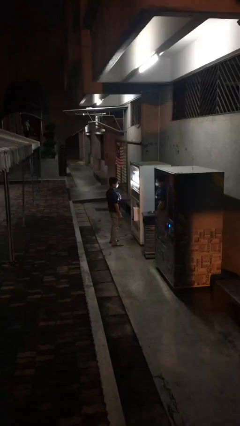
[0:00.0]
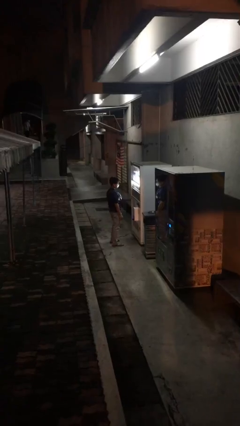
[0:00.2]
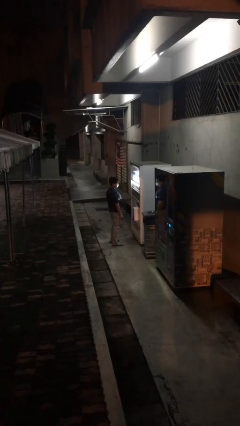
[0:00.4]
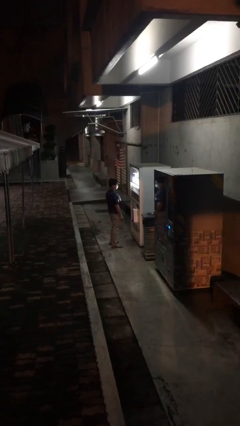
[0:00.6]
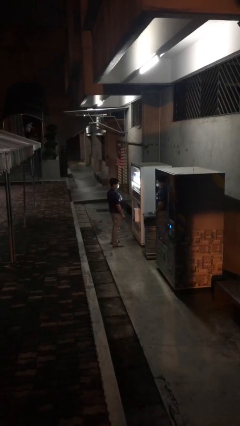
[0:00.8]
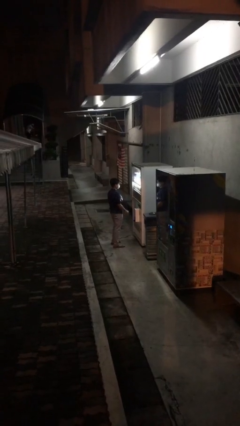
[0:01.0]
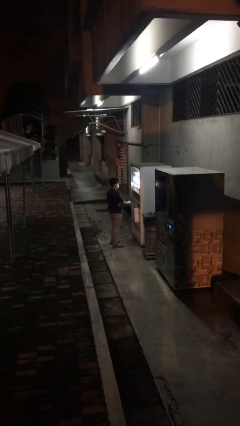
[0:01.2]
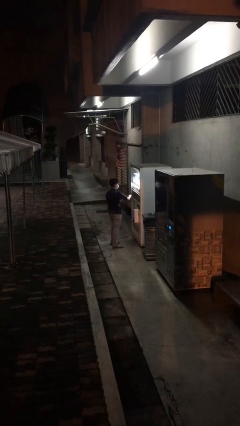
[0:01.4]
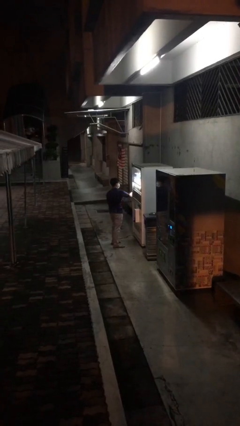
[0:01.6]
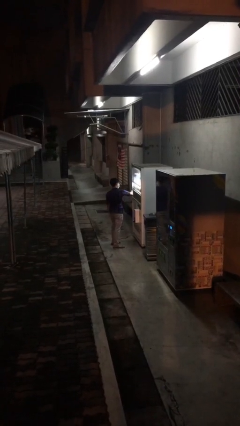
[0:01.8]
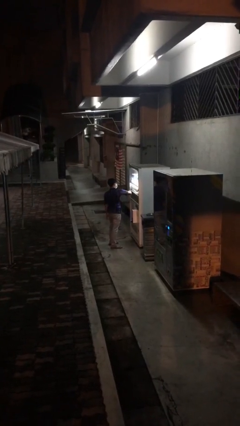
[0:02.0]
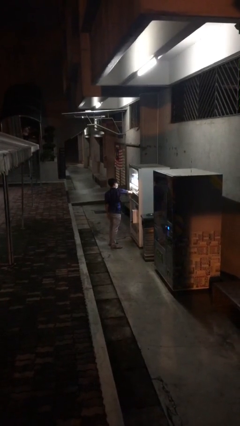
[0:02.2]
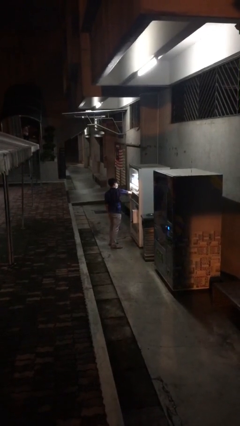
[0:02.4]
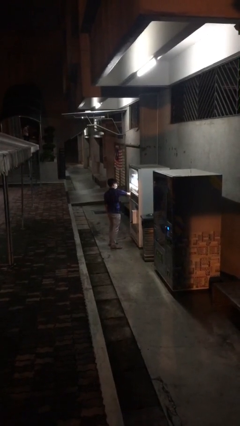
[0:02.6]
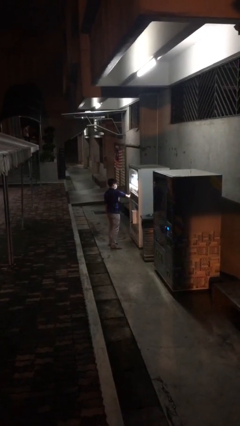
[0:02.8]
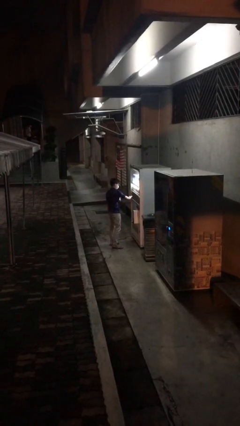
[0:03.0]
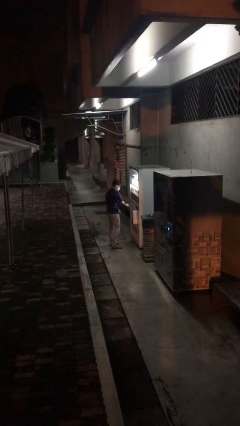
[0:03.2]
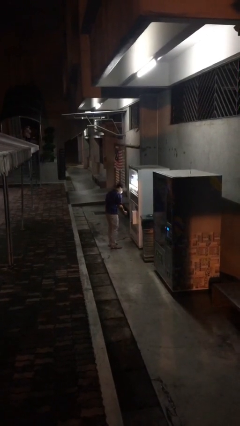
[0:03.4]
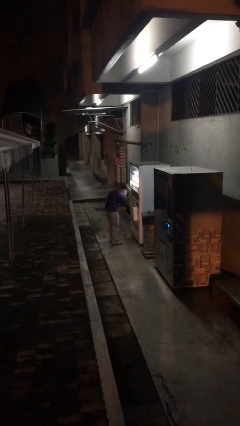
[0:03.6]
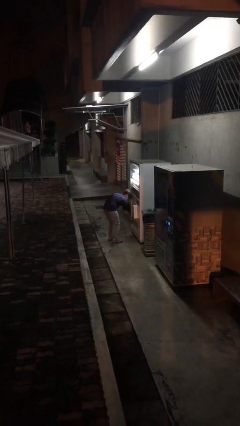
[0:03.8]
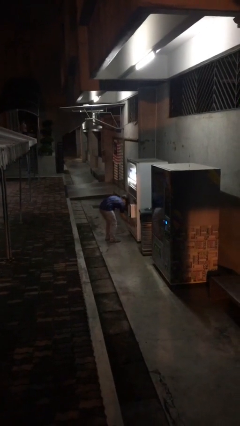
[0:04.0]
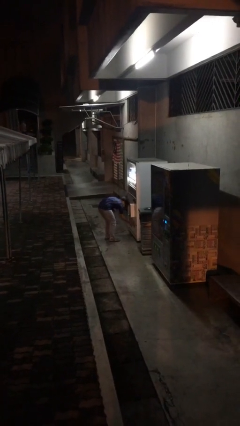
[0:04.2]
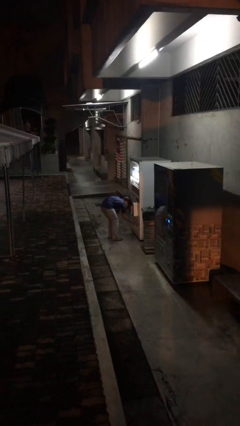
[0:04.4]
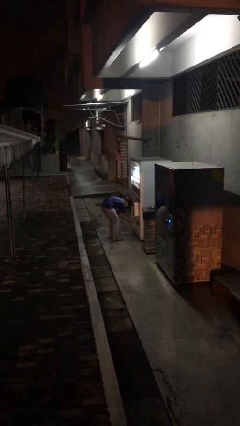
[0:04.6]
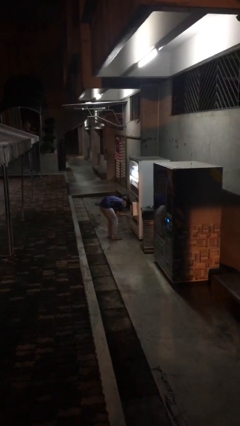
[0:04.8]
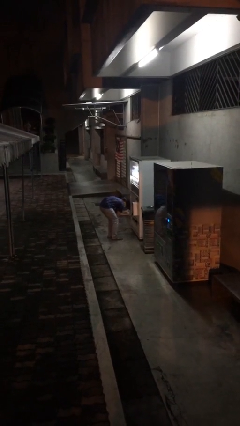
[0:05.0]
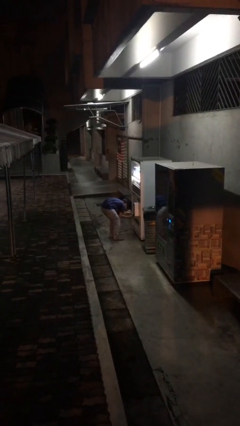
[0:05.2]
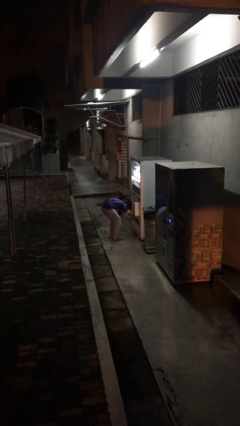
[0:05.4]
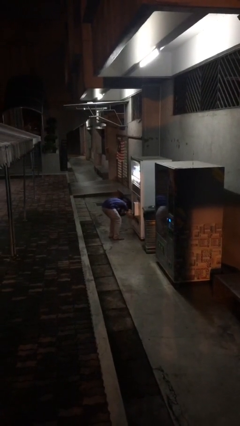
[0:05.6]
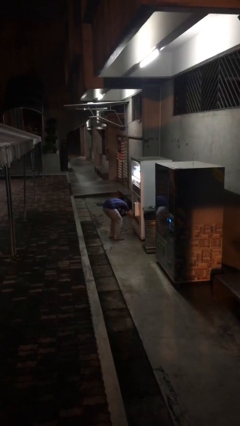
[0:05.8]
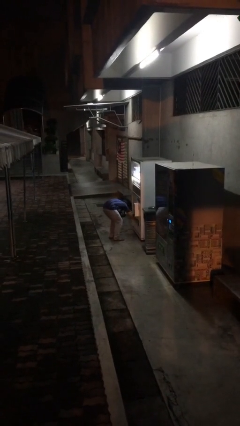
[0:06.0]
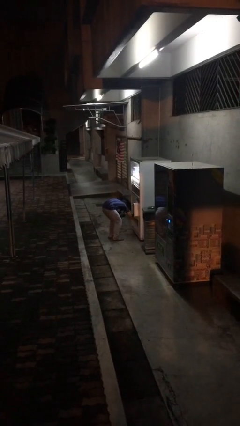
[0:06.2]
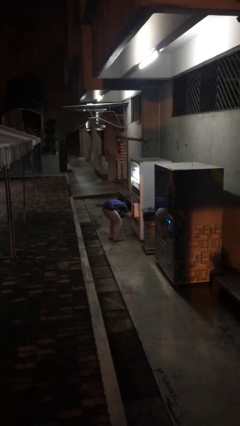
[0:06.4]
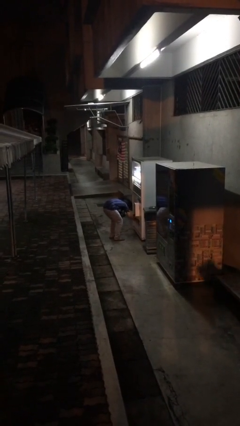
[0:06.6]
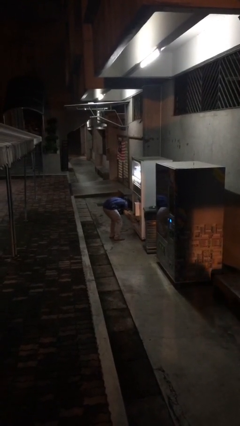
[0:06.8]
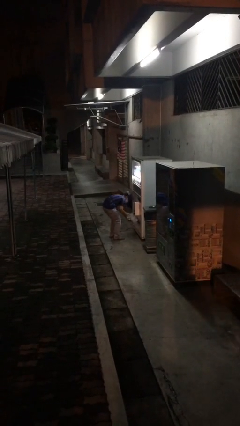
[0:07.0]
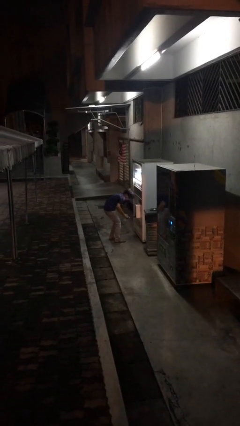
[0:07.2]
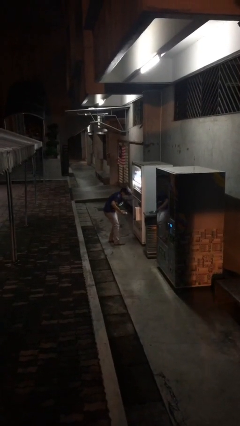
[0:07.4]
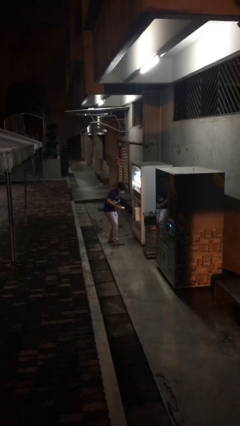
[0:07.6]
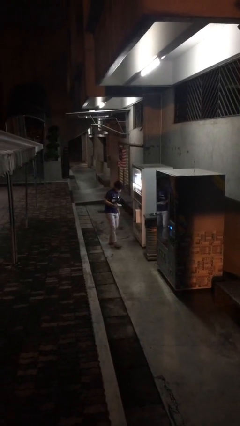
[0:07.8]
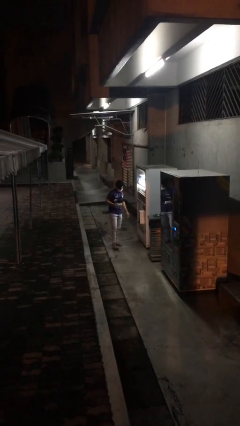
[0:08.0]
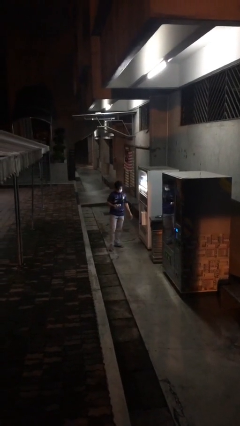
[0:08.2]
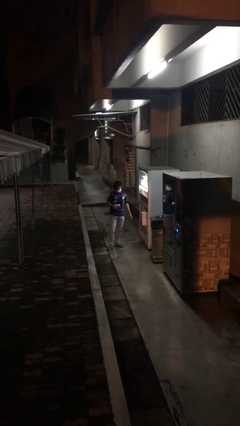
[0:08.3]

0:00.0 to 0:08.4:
person purchases from machine

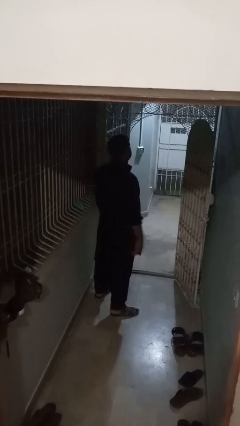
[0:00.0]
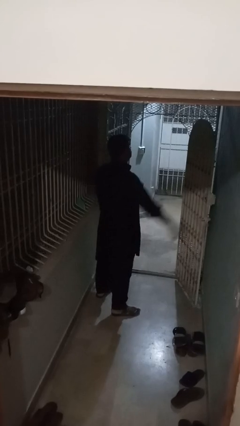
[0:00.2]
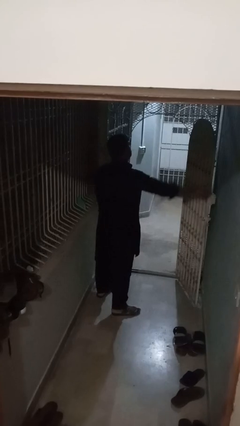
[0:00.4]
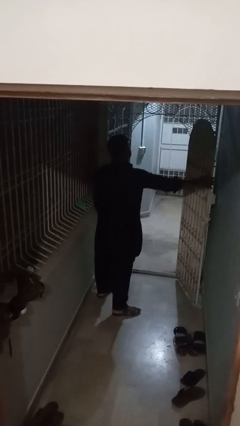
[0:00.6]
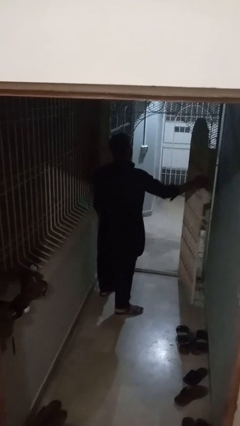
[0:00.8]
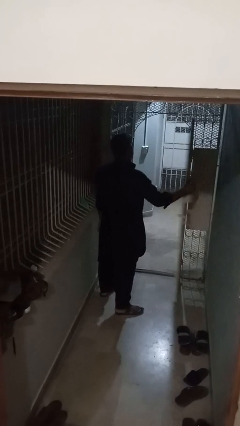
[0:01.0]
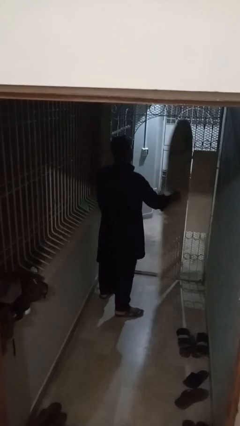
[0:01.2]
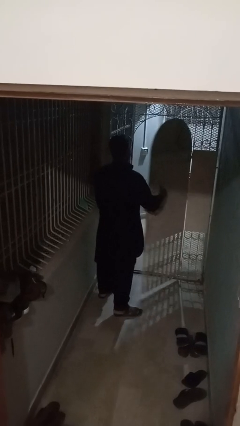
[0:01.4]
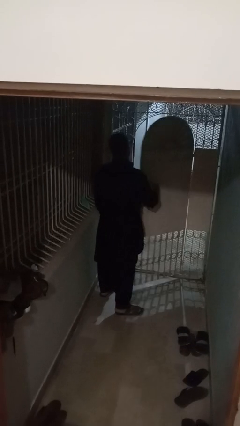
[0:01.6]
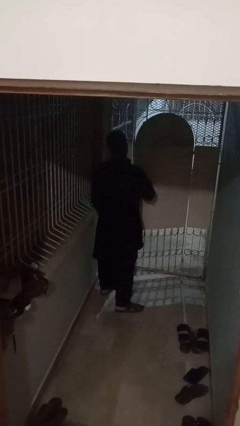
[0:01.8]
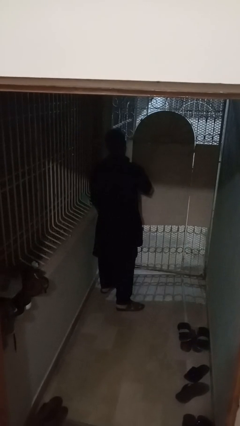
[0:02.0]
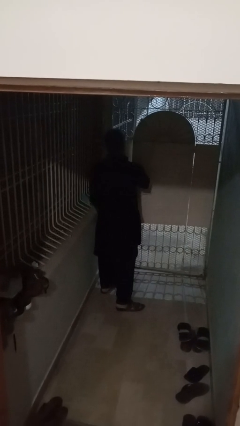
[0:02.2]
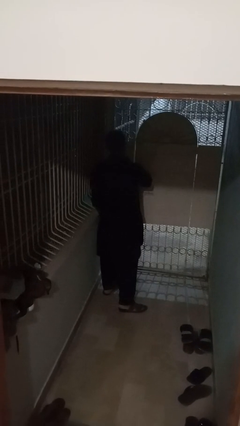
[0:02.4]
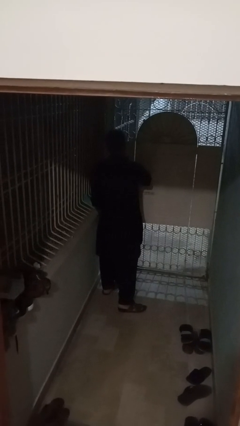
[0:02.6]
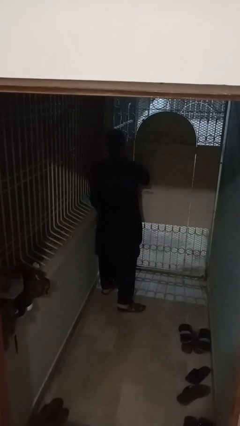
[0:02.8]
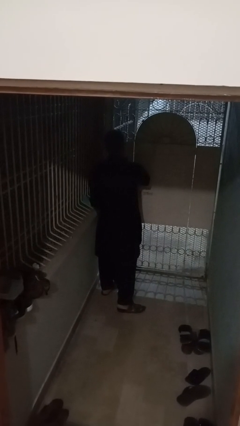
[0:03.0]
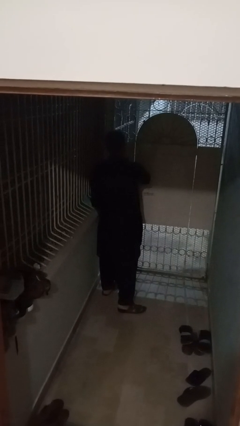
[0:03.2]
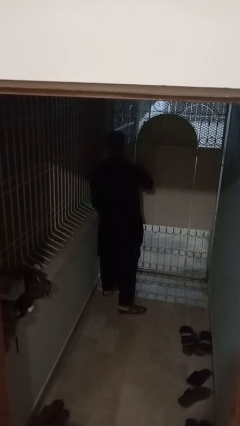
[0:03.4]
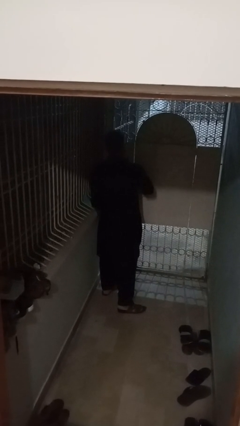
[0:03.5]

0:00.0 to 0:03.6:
person closes gate

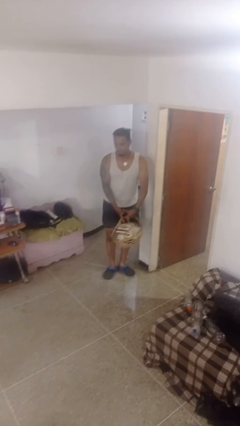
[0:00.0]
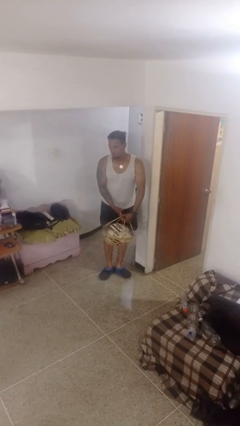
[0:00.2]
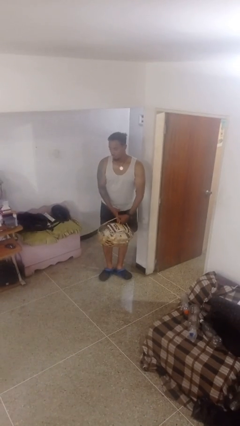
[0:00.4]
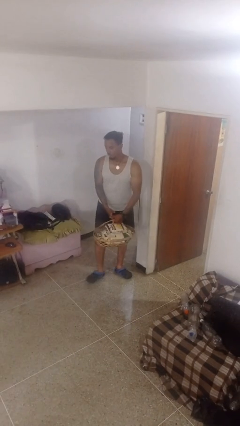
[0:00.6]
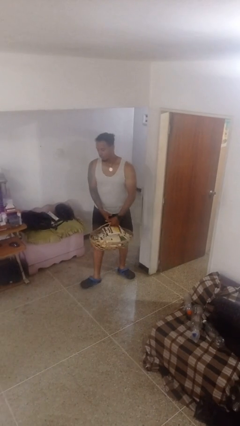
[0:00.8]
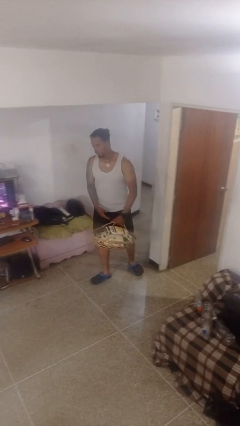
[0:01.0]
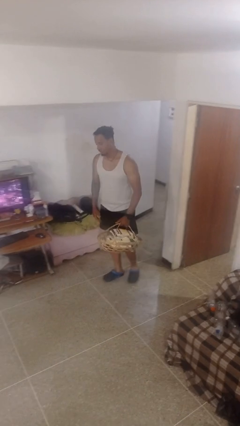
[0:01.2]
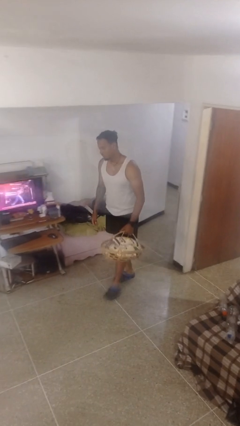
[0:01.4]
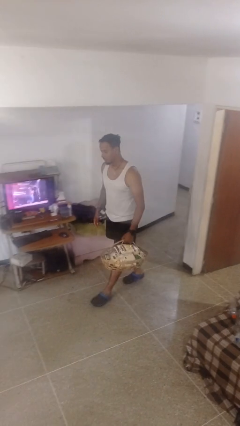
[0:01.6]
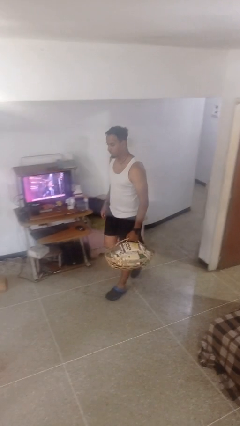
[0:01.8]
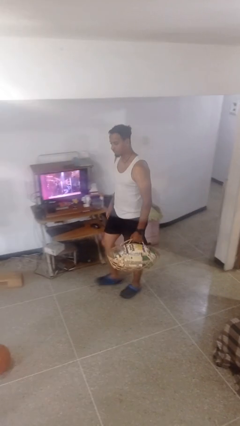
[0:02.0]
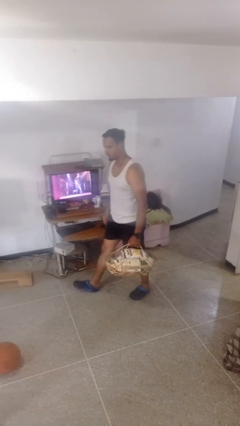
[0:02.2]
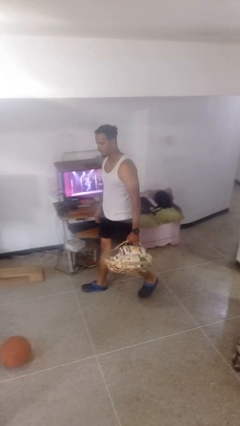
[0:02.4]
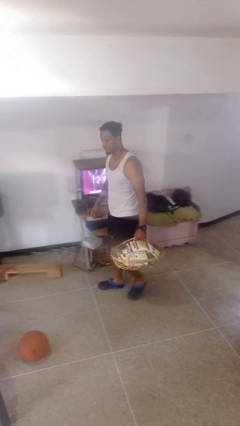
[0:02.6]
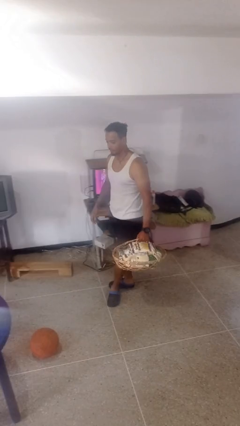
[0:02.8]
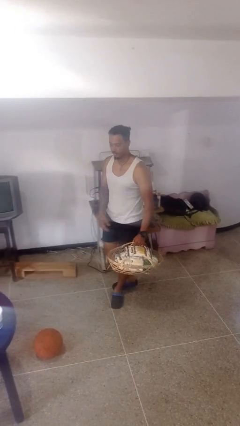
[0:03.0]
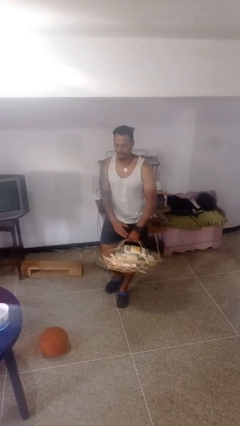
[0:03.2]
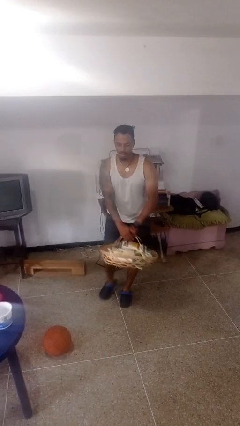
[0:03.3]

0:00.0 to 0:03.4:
person carries groceries

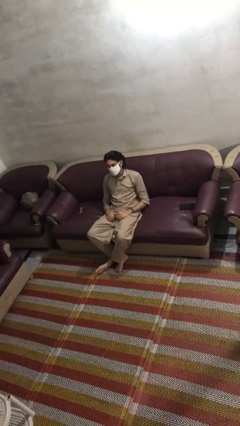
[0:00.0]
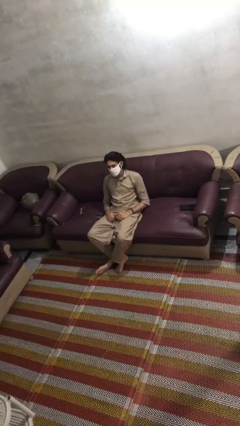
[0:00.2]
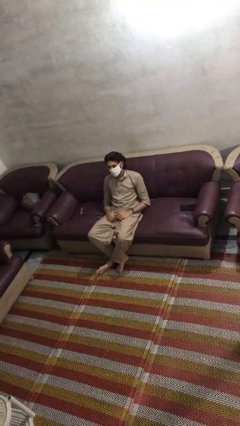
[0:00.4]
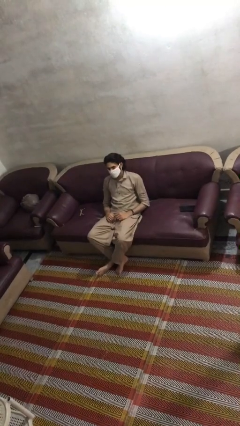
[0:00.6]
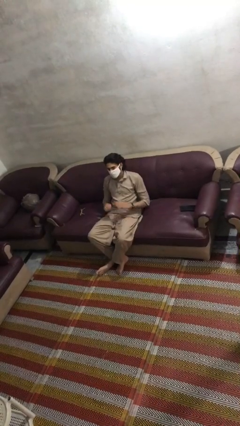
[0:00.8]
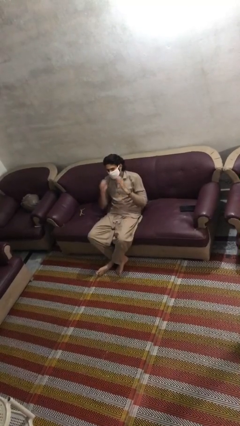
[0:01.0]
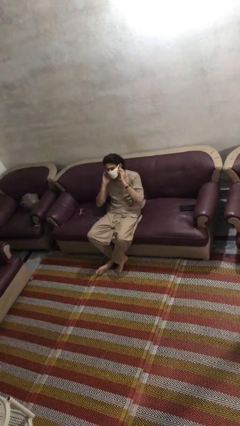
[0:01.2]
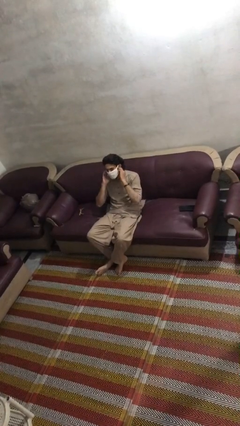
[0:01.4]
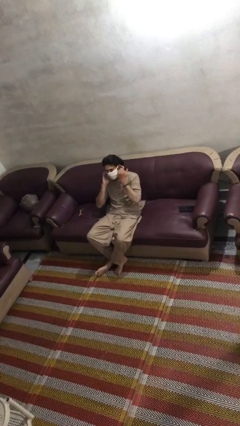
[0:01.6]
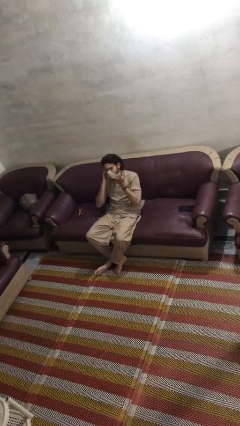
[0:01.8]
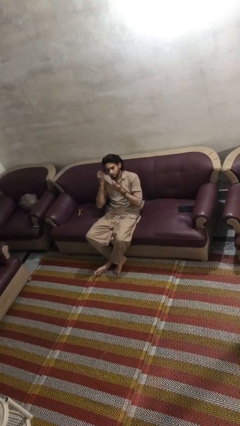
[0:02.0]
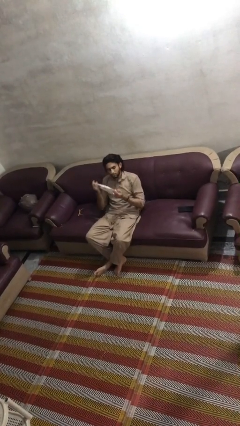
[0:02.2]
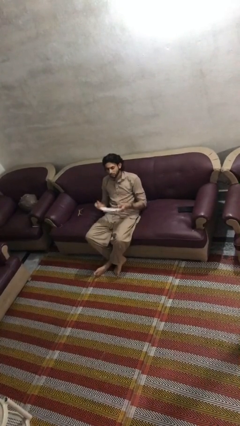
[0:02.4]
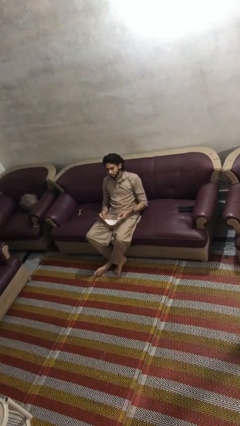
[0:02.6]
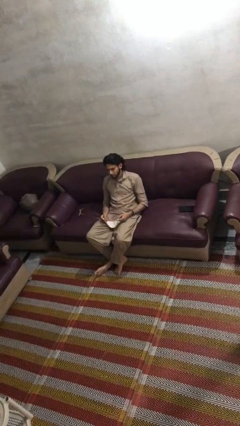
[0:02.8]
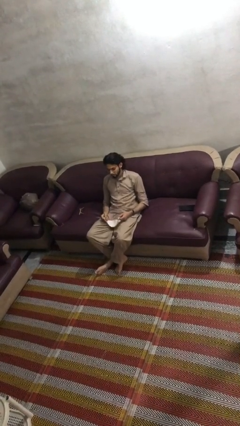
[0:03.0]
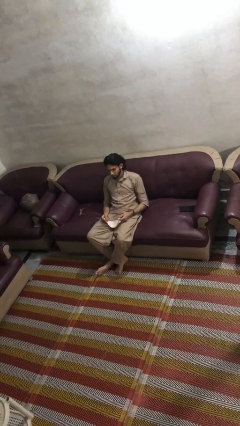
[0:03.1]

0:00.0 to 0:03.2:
person takes off facemask
